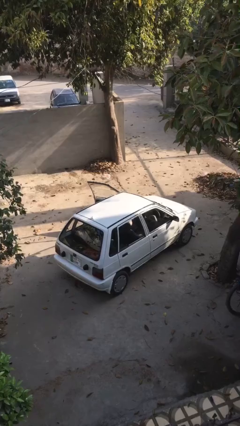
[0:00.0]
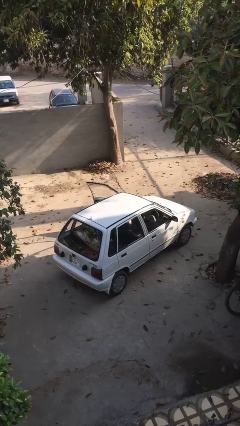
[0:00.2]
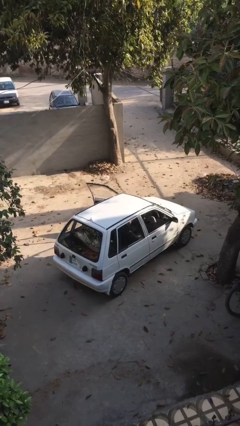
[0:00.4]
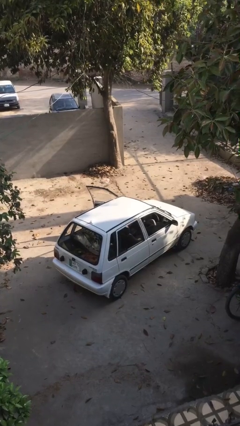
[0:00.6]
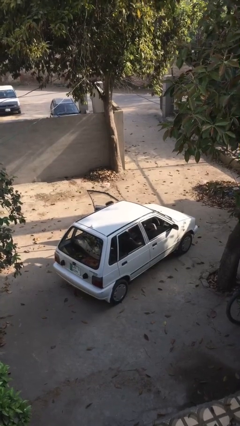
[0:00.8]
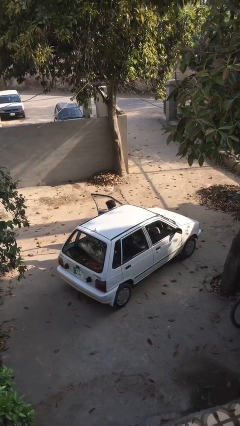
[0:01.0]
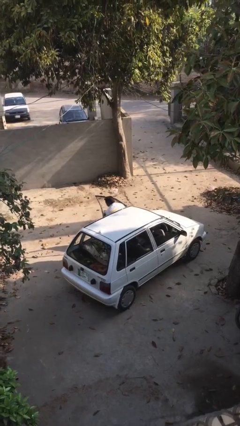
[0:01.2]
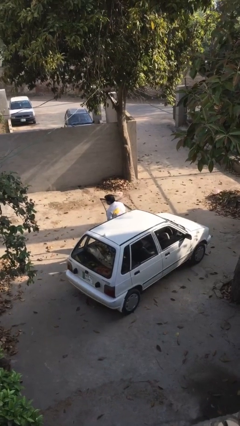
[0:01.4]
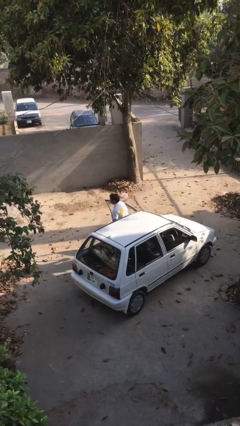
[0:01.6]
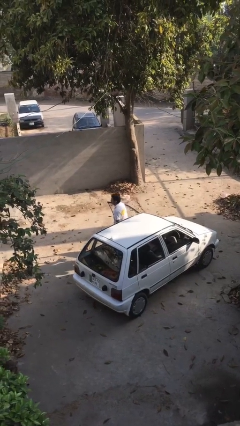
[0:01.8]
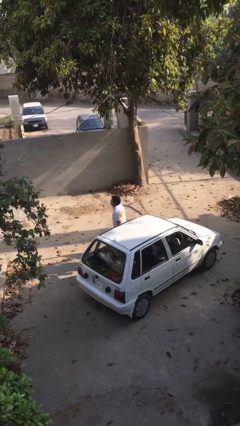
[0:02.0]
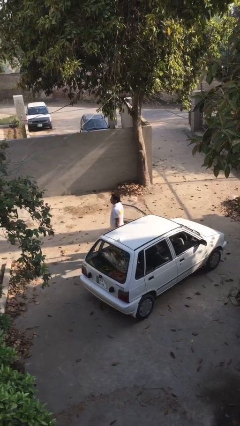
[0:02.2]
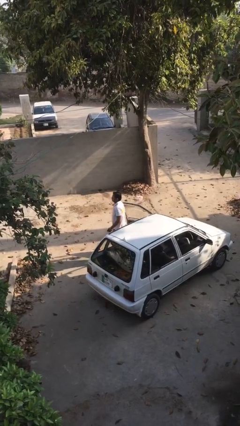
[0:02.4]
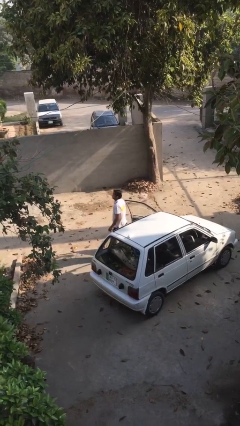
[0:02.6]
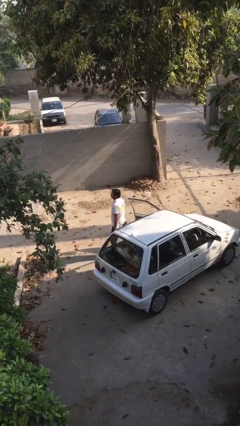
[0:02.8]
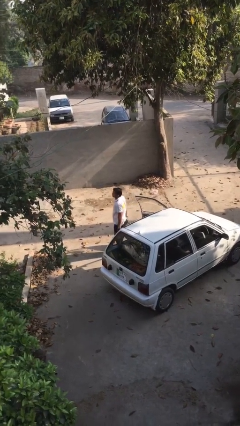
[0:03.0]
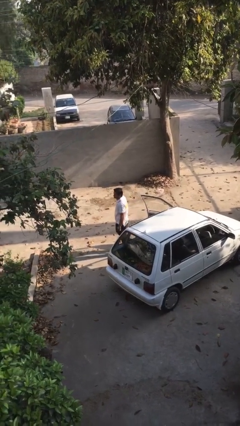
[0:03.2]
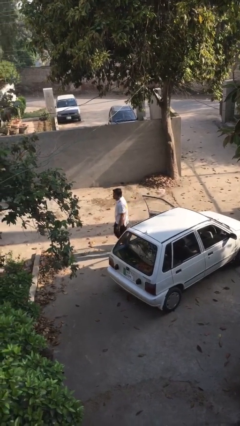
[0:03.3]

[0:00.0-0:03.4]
person exits car

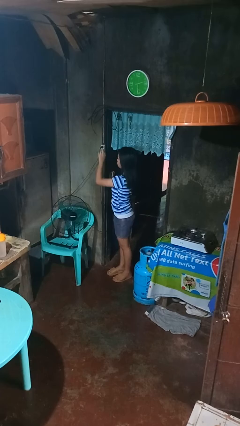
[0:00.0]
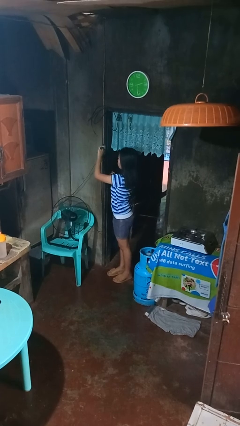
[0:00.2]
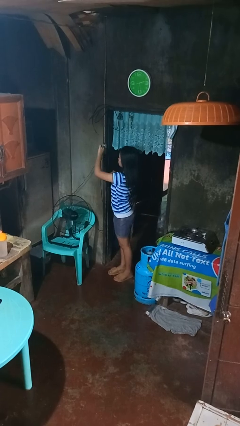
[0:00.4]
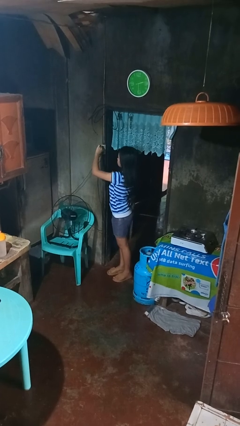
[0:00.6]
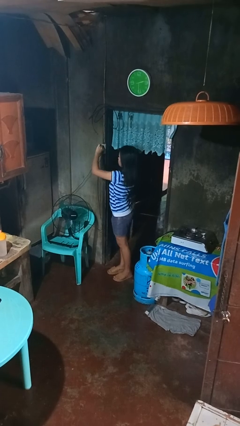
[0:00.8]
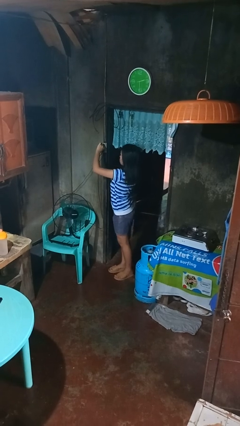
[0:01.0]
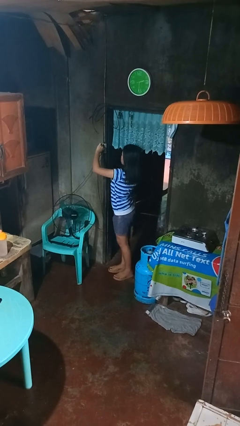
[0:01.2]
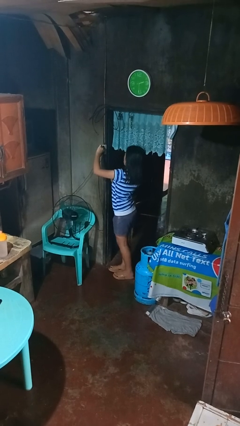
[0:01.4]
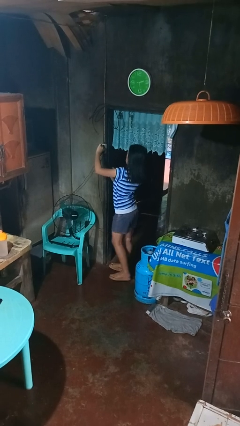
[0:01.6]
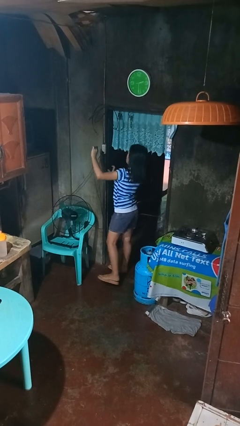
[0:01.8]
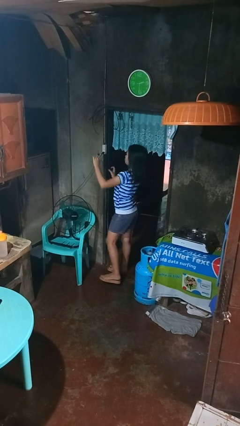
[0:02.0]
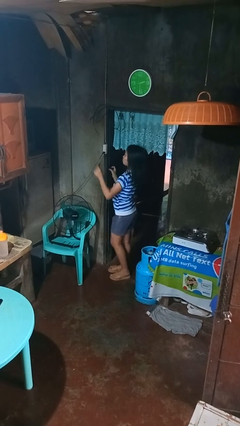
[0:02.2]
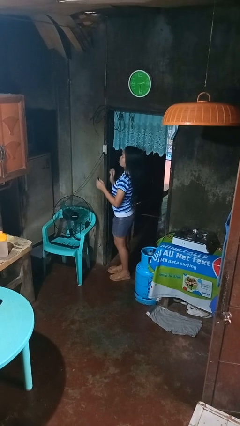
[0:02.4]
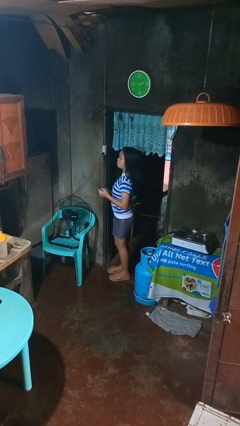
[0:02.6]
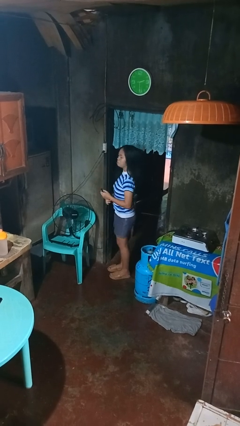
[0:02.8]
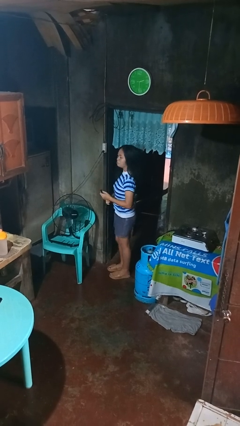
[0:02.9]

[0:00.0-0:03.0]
person unplugs from electrical socket

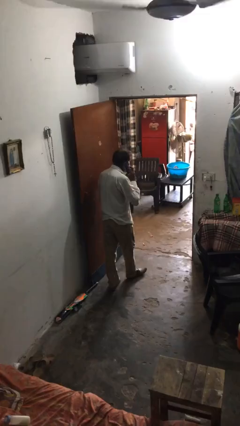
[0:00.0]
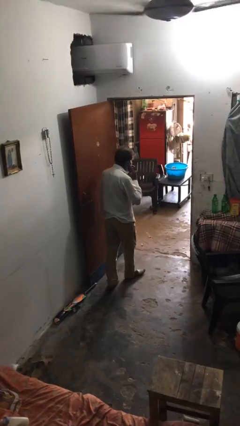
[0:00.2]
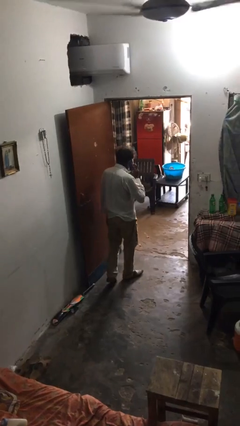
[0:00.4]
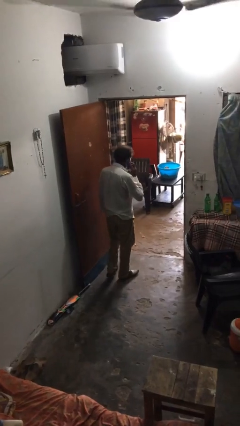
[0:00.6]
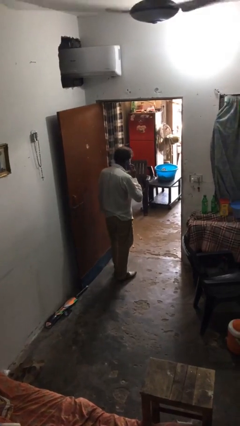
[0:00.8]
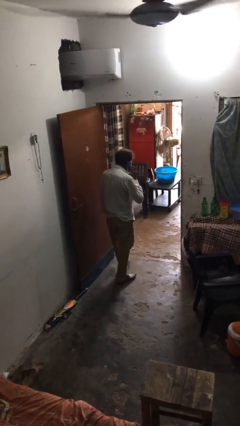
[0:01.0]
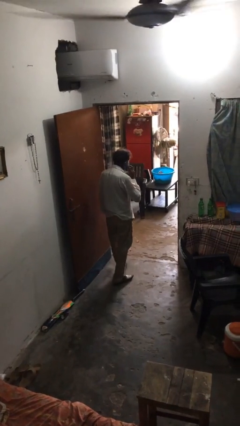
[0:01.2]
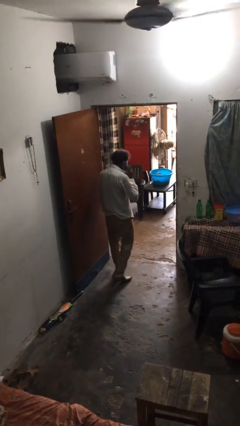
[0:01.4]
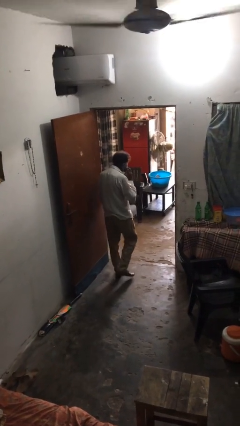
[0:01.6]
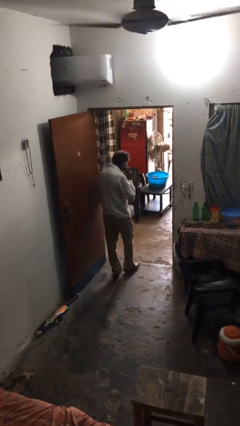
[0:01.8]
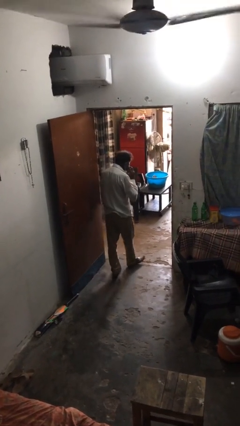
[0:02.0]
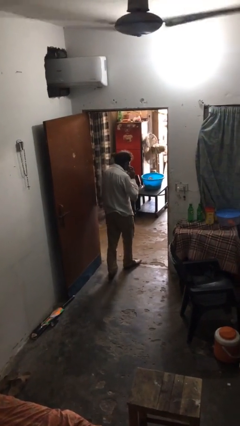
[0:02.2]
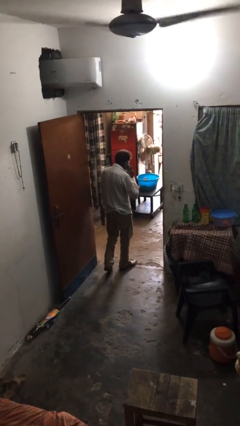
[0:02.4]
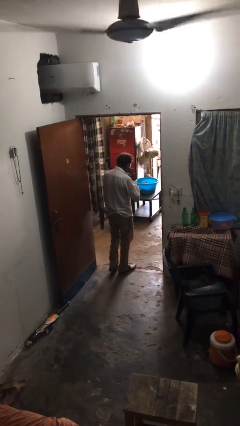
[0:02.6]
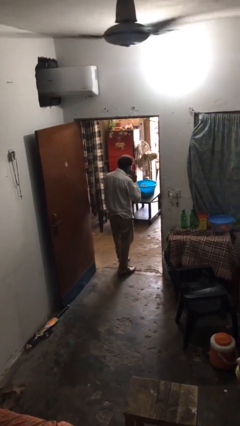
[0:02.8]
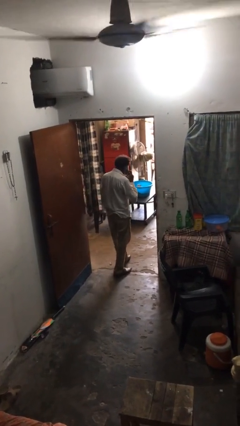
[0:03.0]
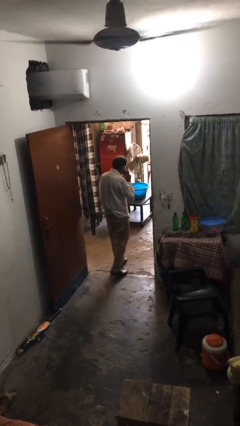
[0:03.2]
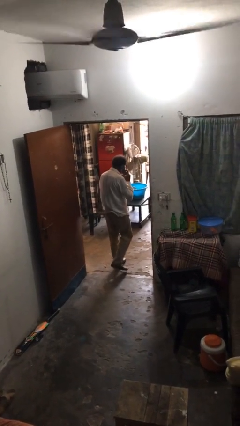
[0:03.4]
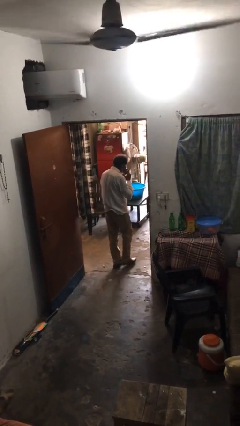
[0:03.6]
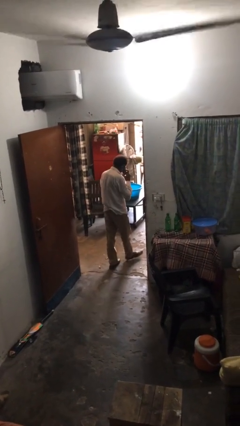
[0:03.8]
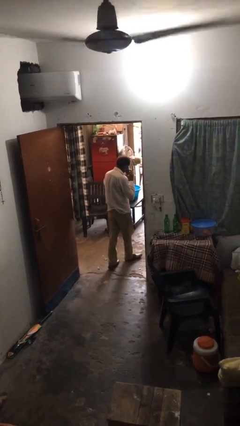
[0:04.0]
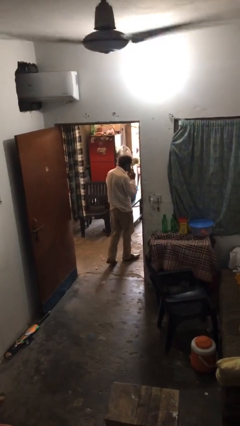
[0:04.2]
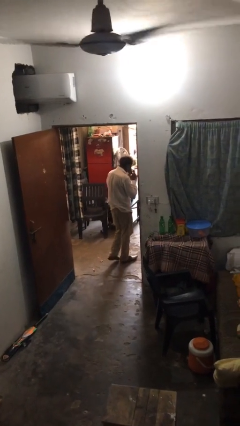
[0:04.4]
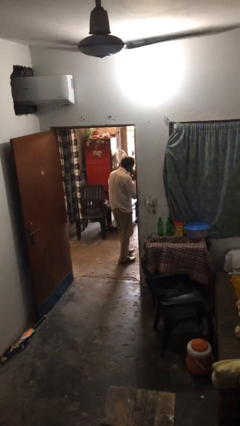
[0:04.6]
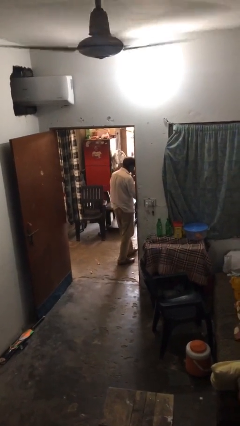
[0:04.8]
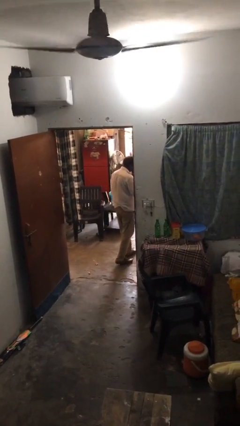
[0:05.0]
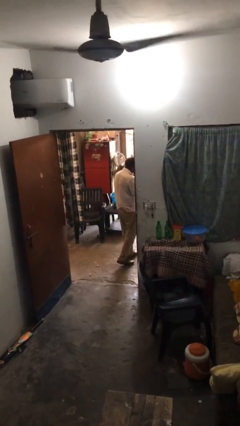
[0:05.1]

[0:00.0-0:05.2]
person exits scene through structure

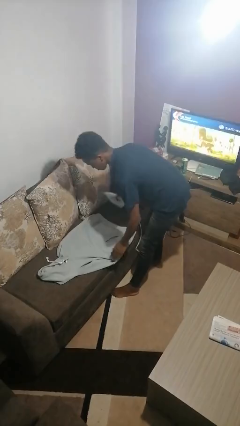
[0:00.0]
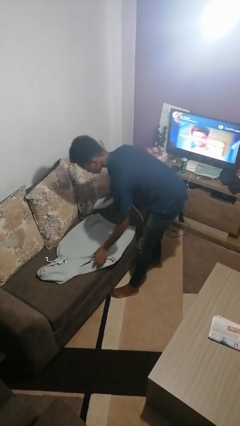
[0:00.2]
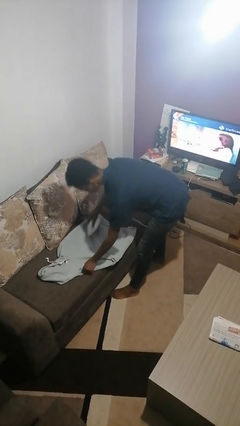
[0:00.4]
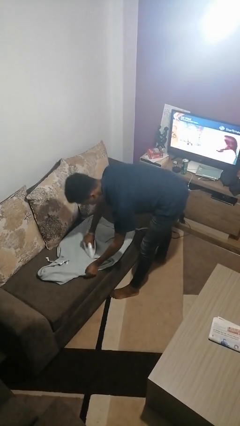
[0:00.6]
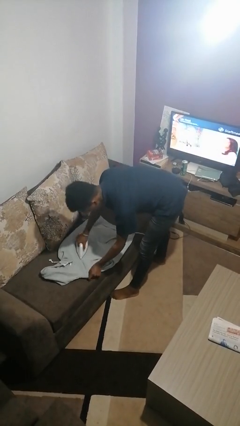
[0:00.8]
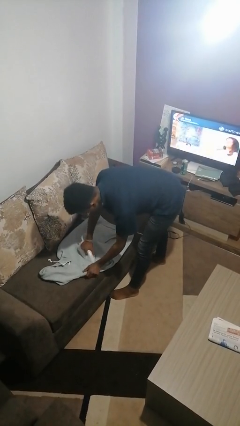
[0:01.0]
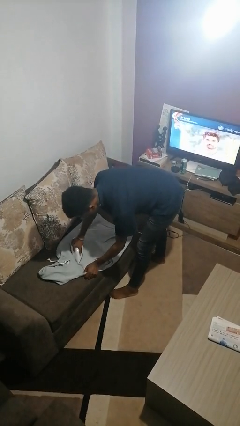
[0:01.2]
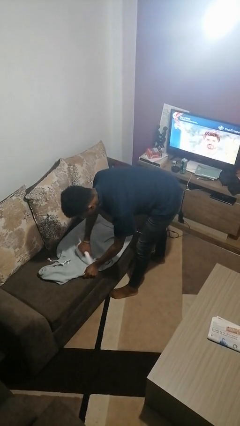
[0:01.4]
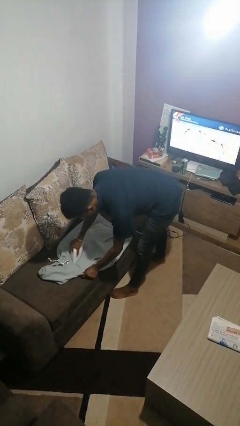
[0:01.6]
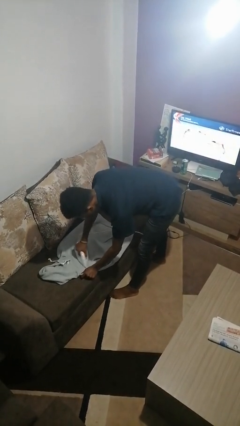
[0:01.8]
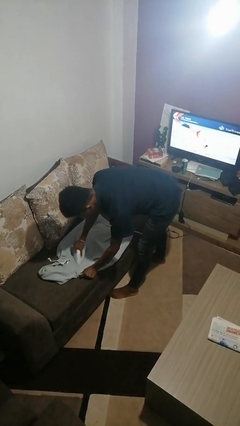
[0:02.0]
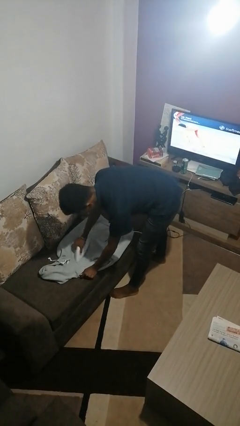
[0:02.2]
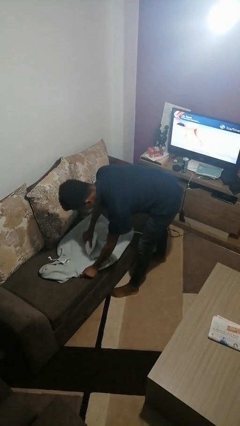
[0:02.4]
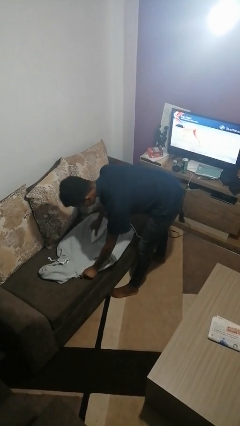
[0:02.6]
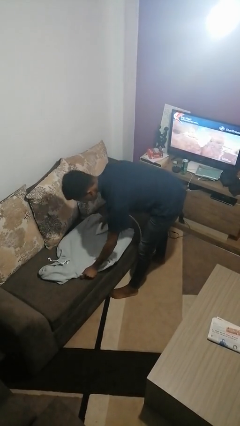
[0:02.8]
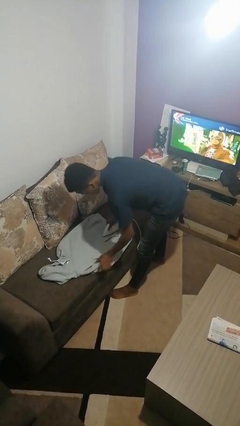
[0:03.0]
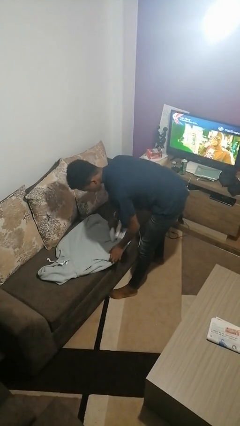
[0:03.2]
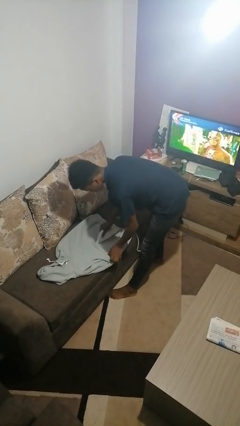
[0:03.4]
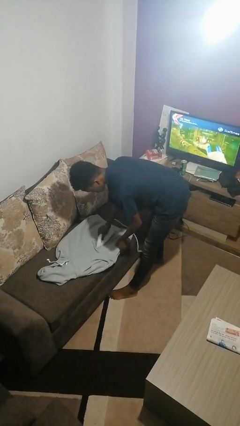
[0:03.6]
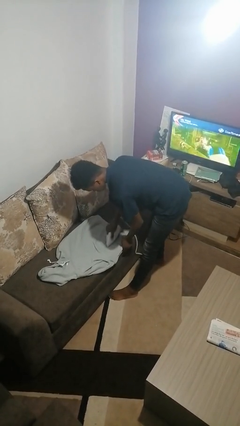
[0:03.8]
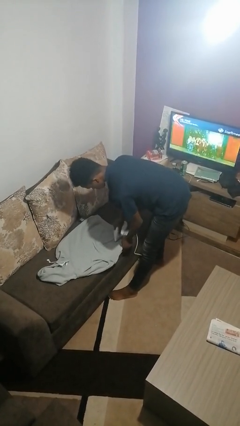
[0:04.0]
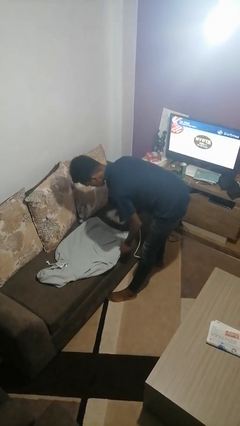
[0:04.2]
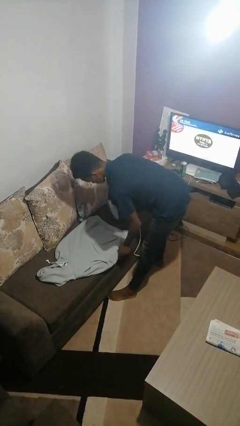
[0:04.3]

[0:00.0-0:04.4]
person irons clothes

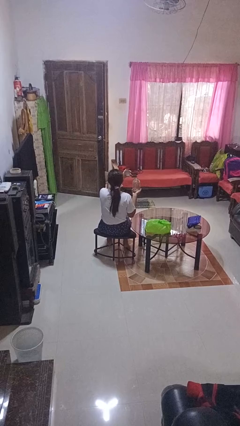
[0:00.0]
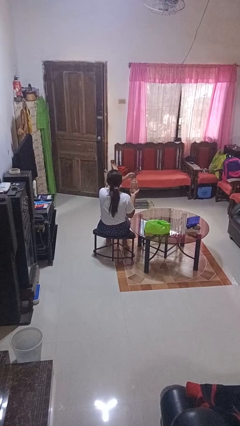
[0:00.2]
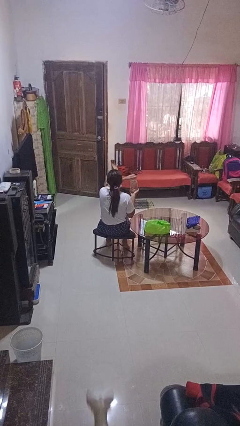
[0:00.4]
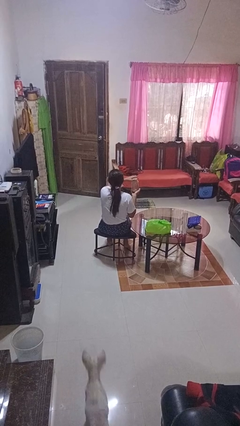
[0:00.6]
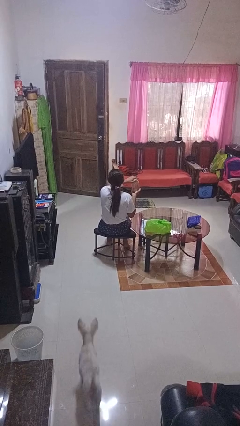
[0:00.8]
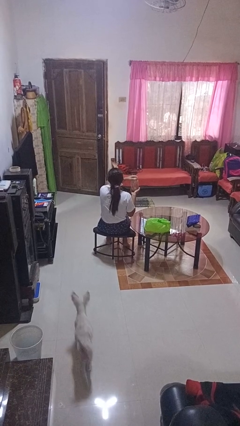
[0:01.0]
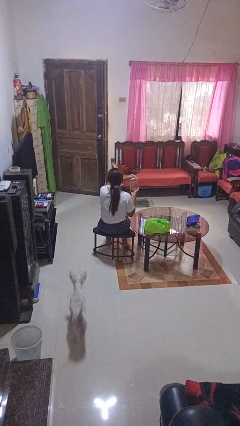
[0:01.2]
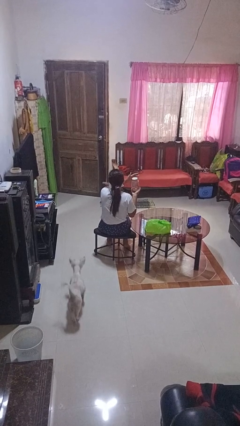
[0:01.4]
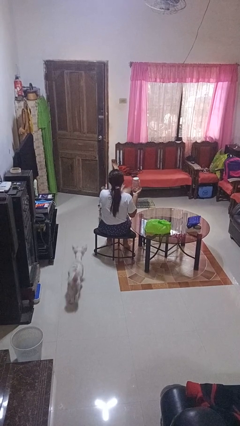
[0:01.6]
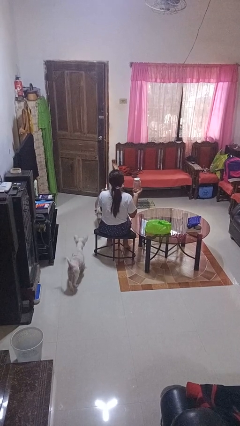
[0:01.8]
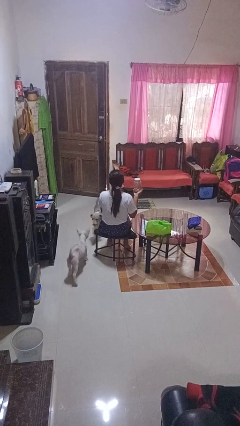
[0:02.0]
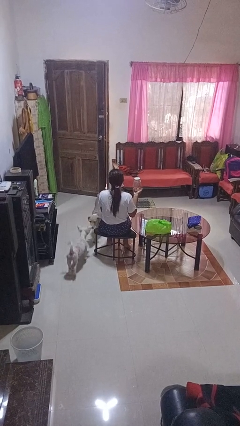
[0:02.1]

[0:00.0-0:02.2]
person closes jar
